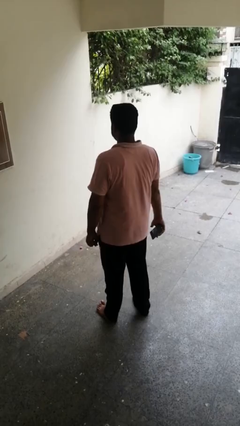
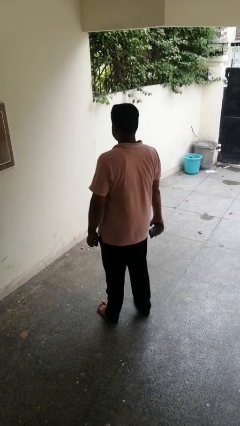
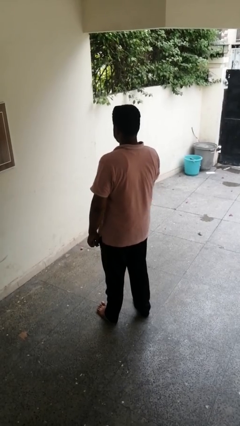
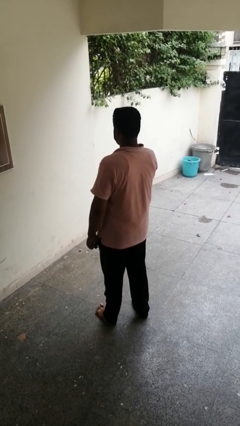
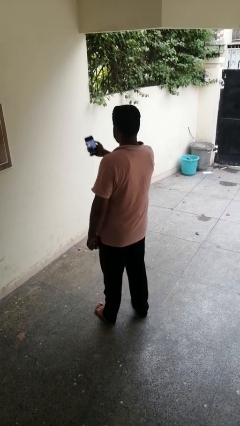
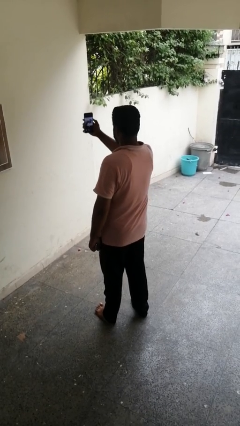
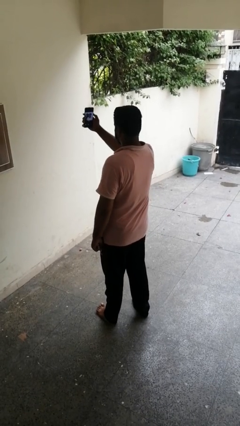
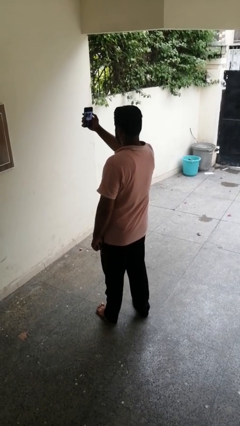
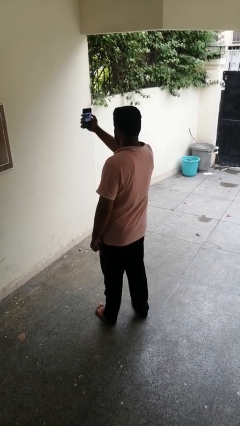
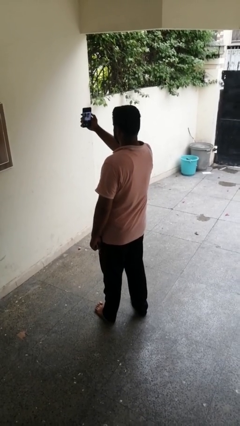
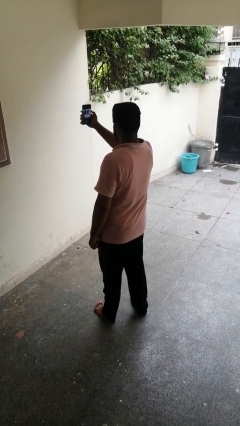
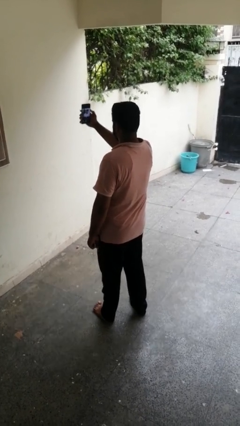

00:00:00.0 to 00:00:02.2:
person takes selfie

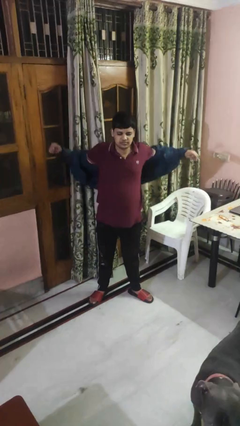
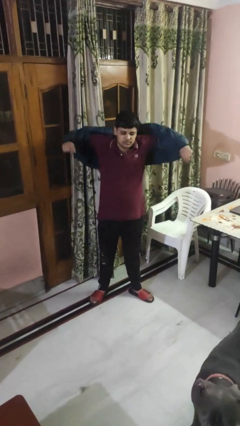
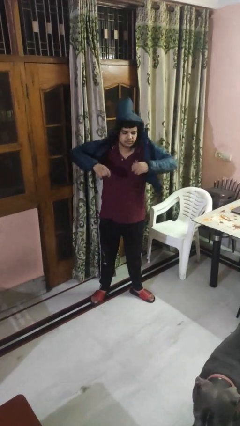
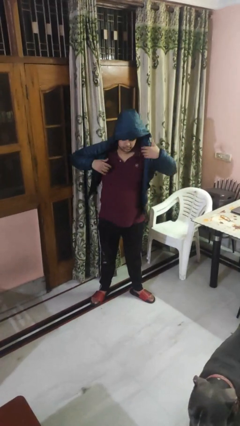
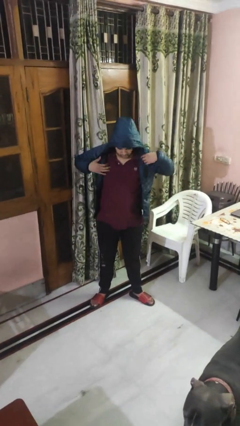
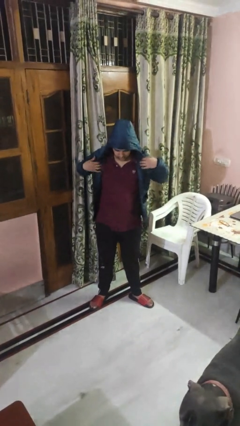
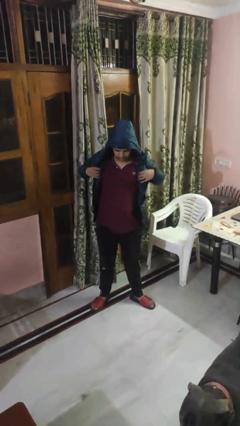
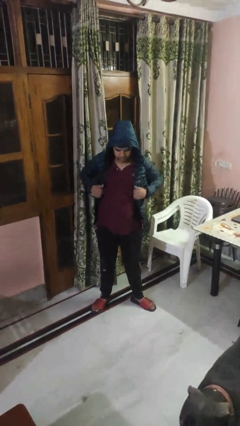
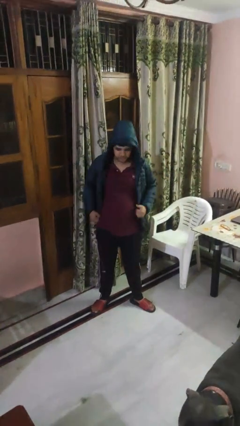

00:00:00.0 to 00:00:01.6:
person puts on hoodie

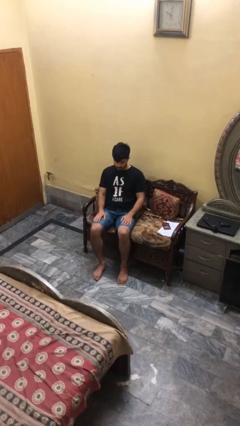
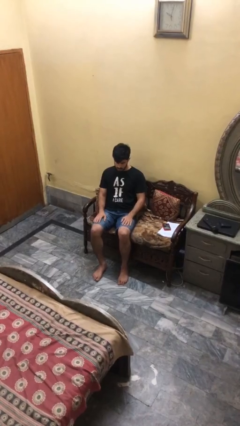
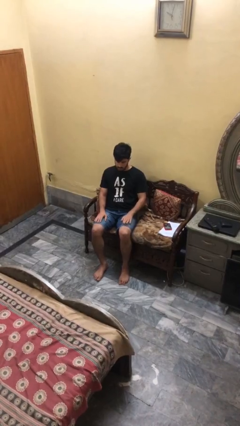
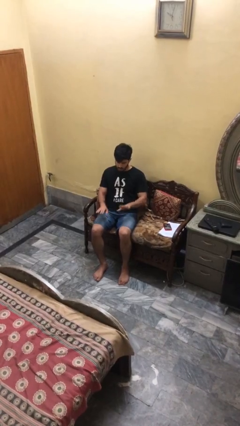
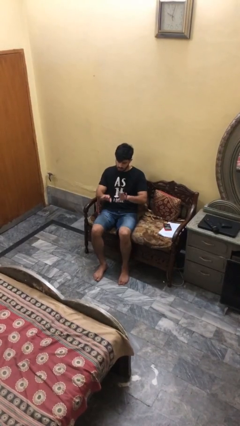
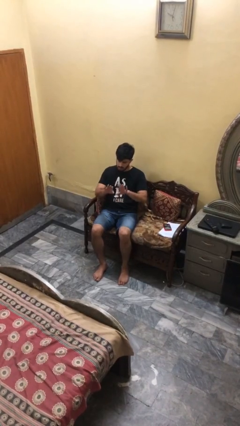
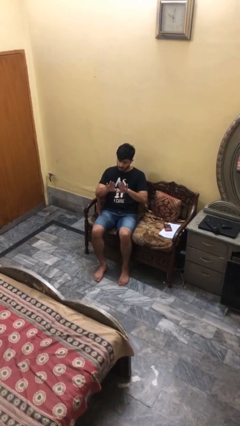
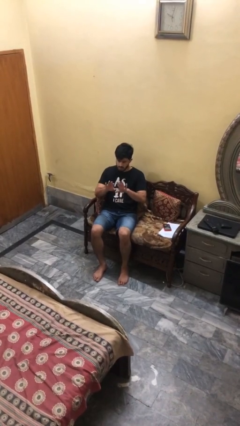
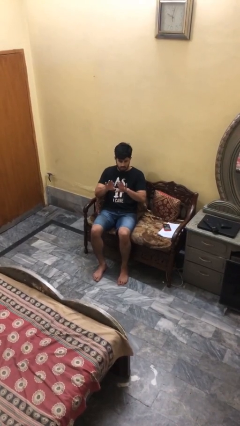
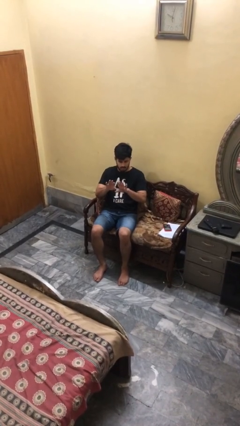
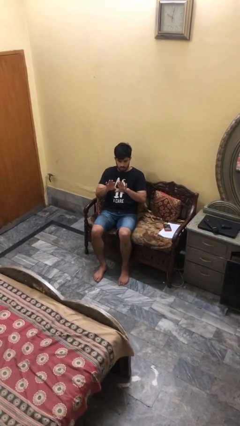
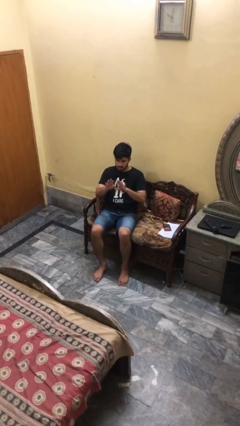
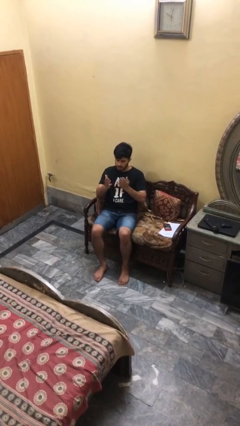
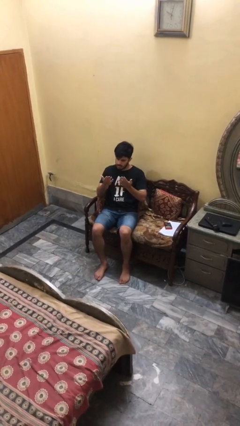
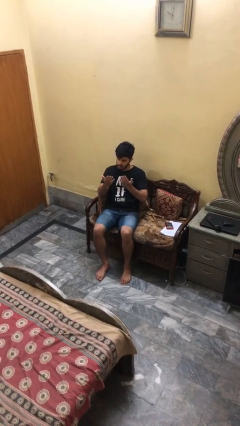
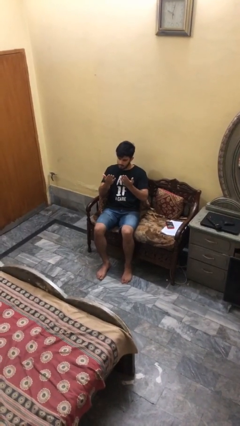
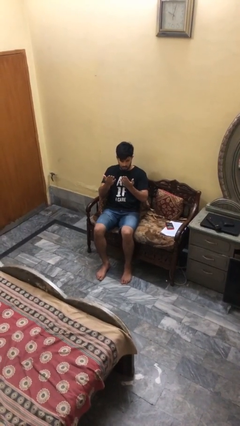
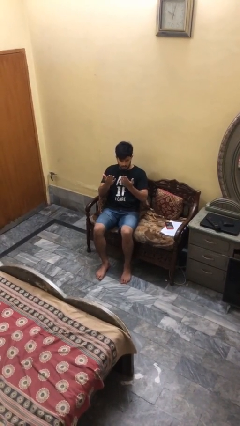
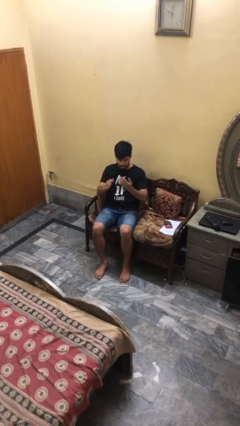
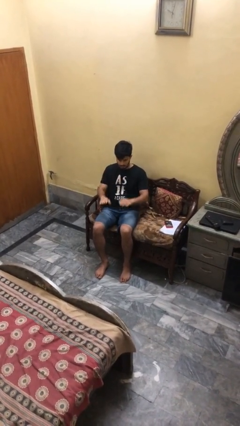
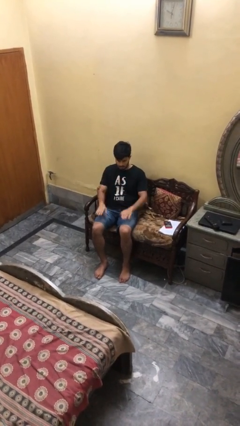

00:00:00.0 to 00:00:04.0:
person looks at hands in lap

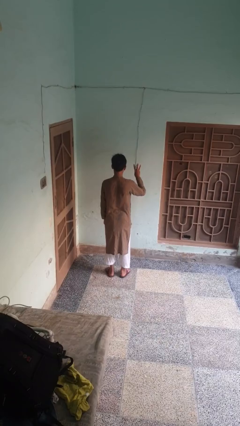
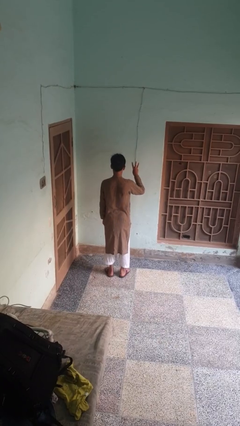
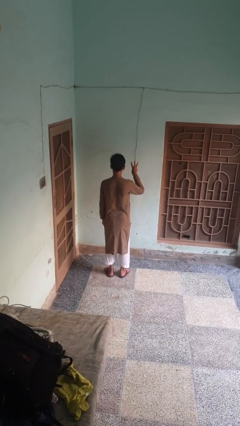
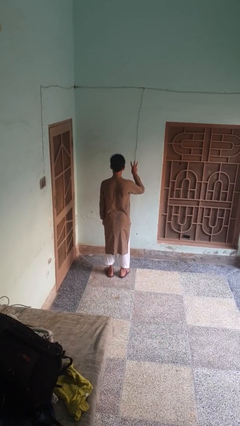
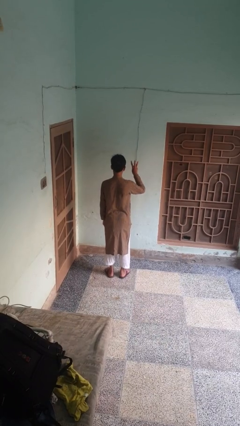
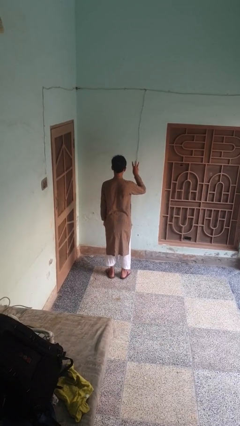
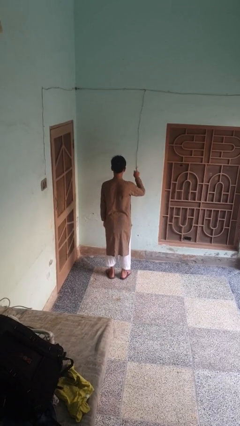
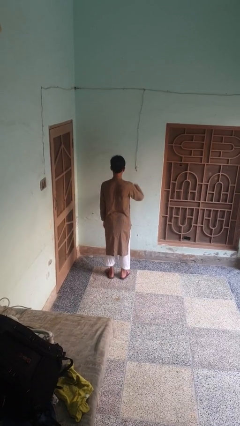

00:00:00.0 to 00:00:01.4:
person gestures number three

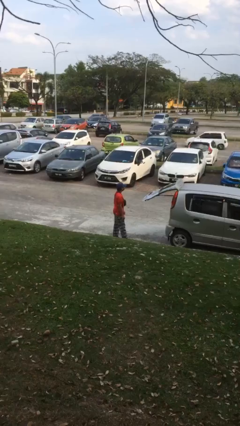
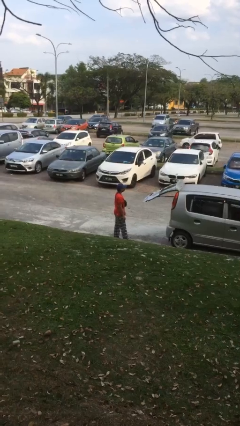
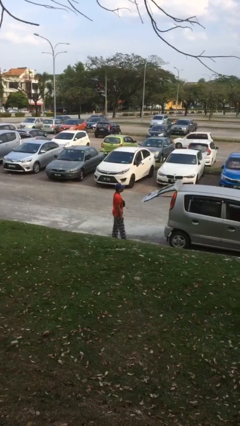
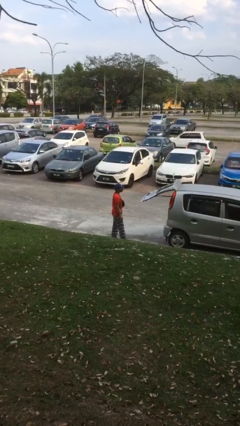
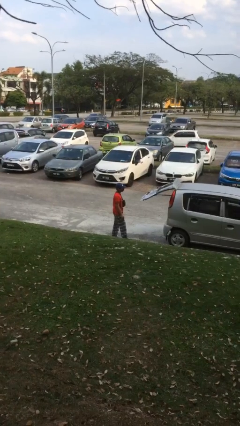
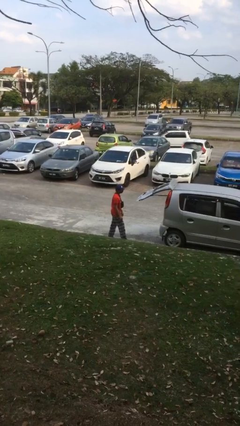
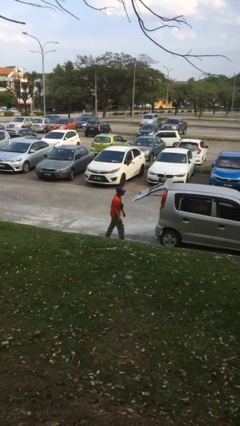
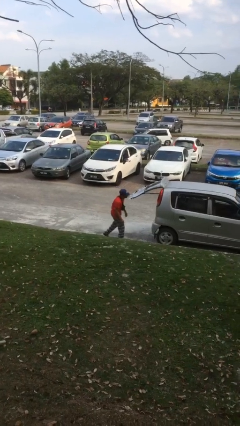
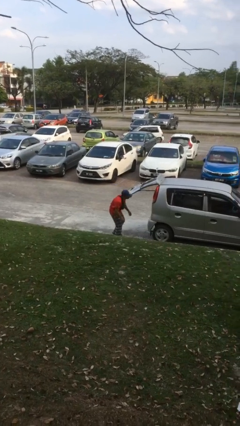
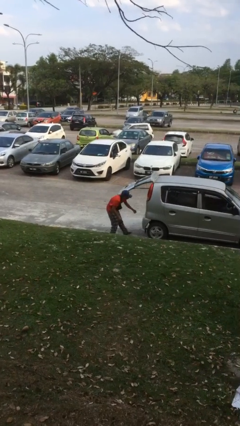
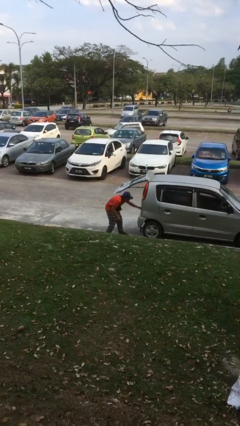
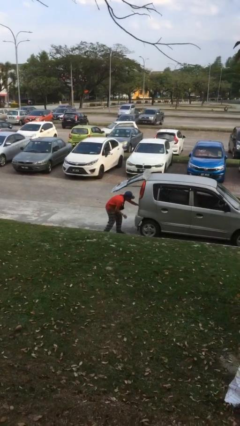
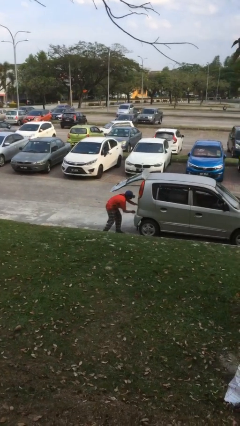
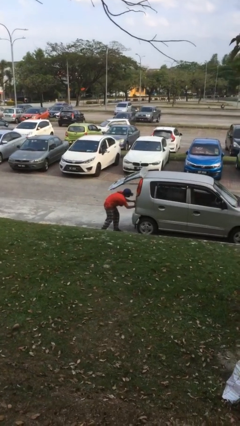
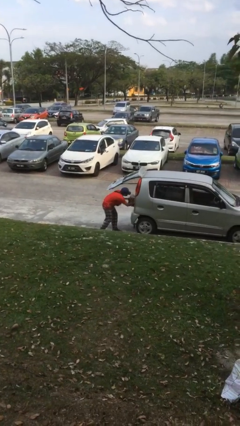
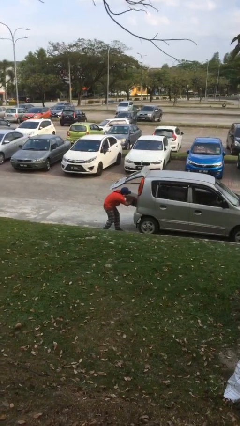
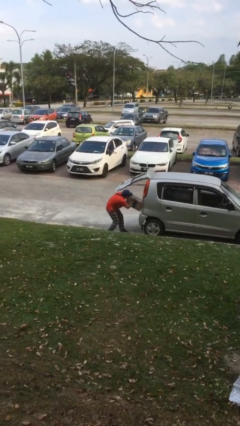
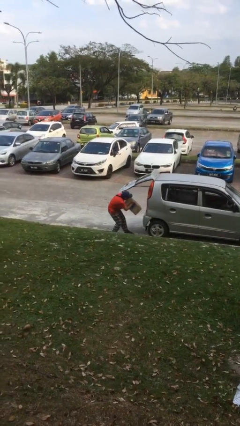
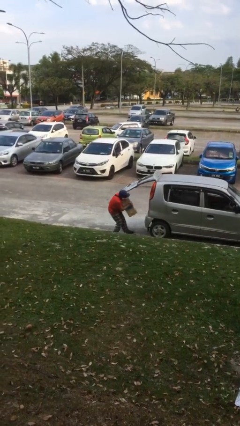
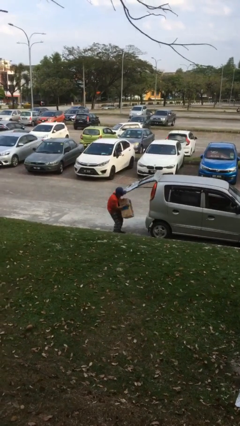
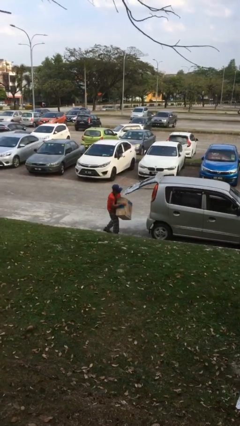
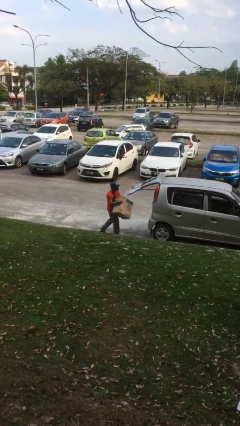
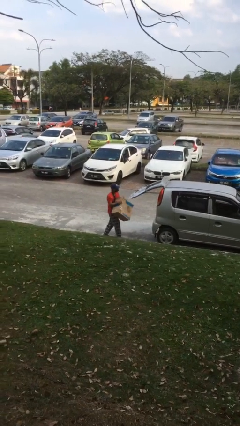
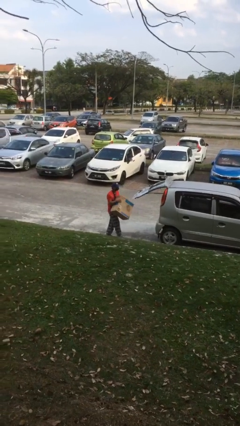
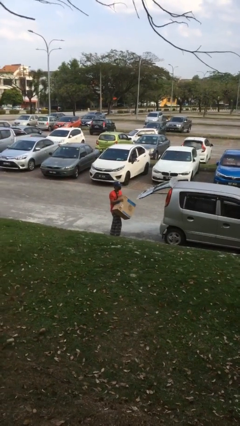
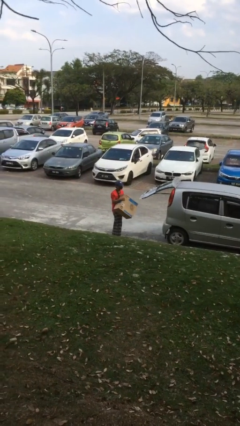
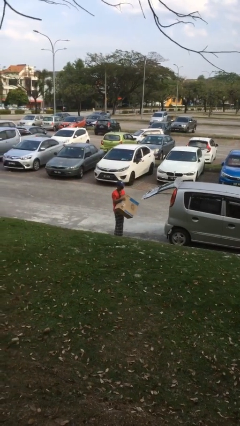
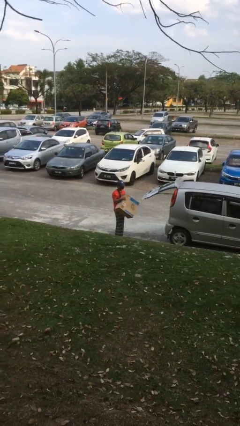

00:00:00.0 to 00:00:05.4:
person unloads car

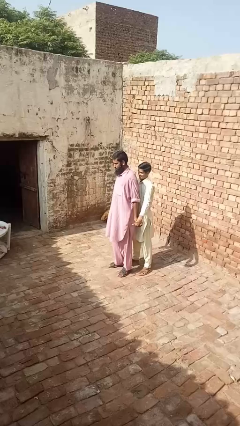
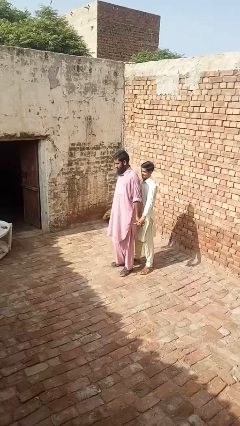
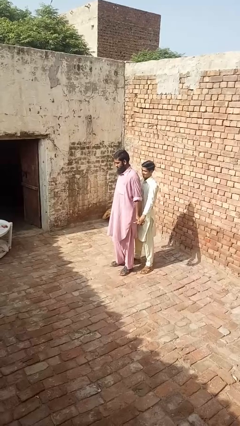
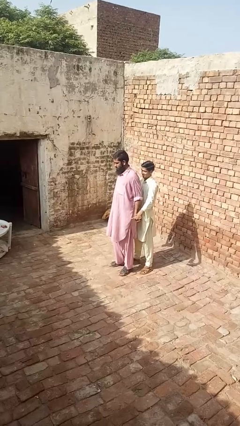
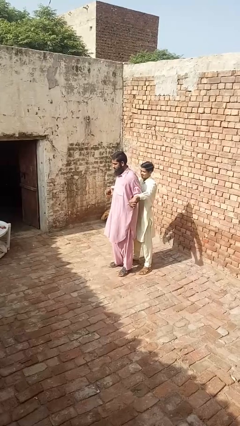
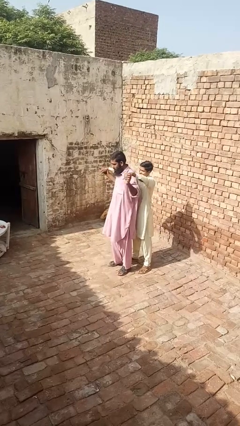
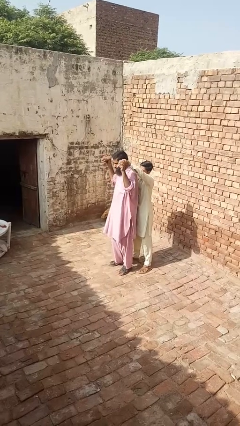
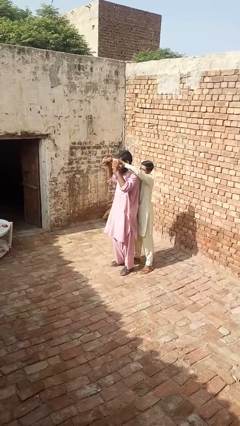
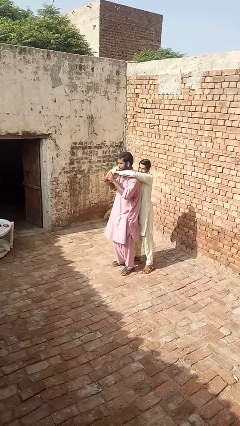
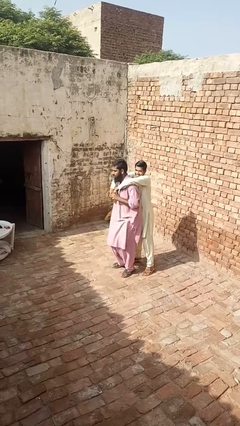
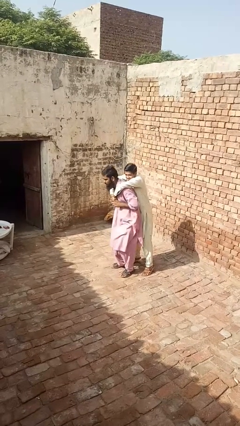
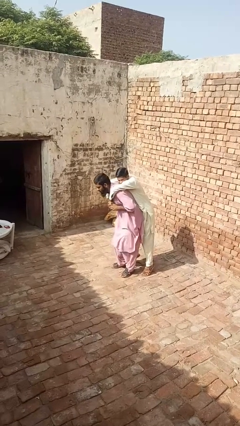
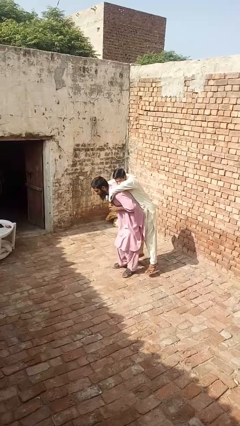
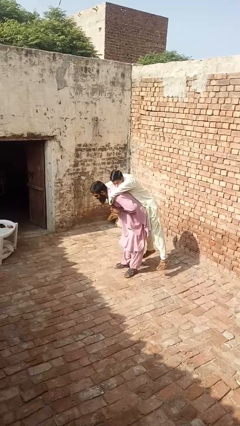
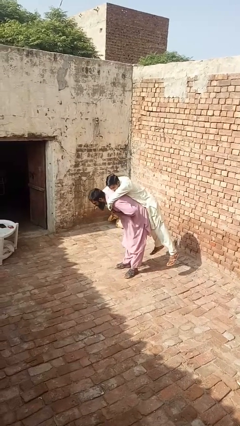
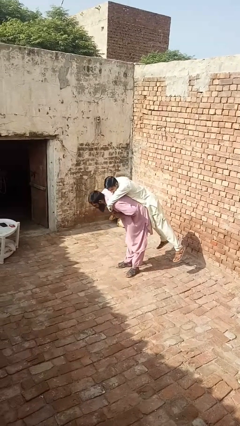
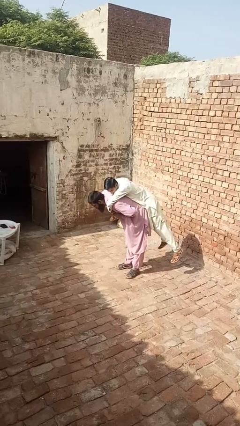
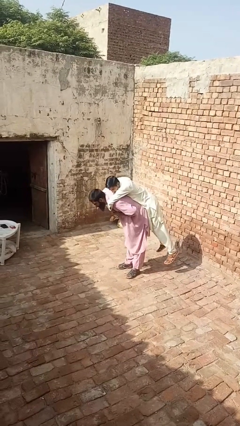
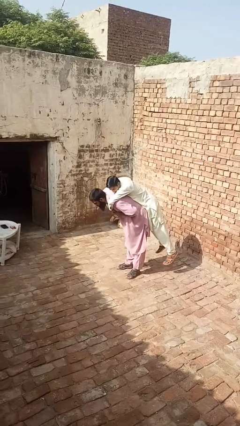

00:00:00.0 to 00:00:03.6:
person carries person over shoulder
